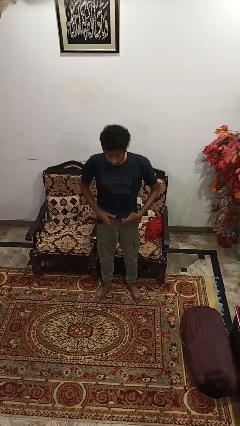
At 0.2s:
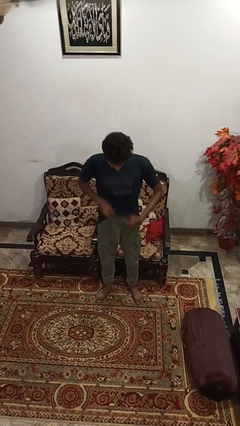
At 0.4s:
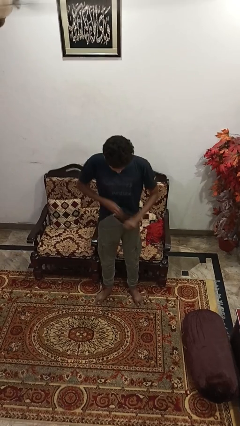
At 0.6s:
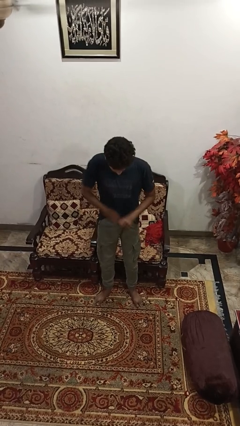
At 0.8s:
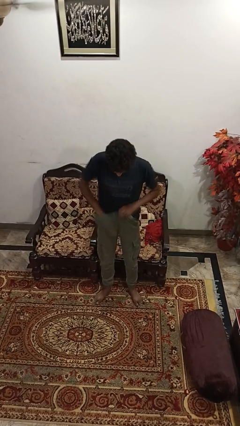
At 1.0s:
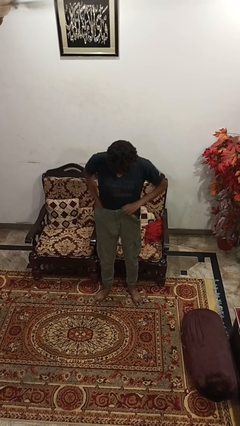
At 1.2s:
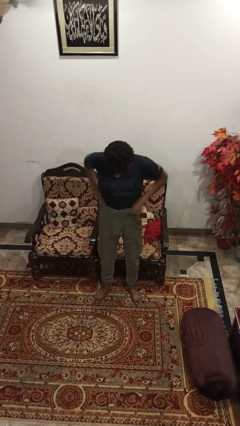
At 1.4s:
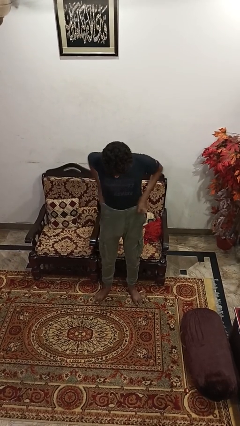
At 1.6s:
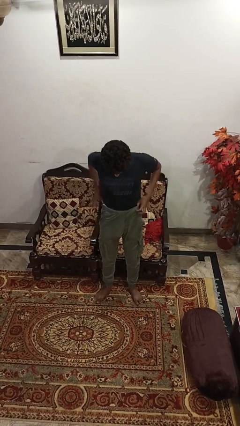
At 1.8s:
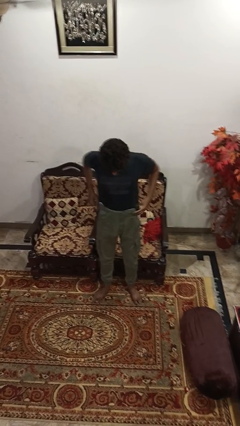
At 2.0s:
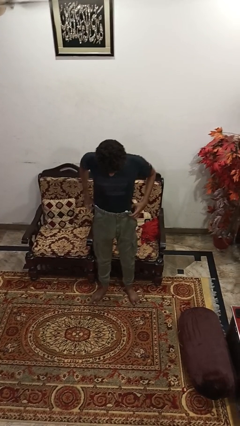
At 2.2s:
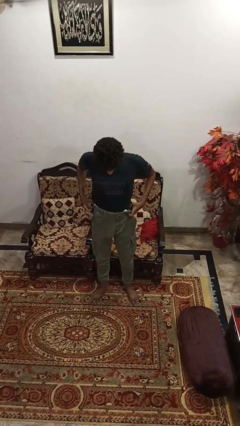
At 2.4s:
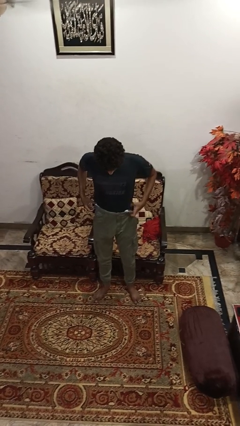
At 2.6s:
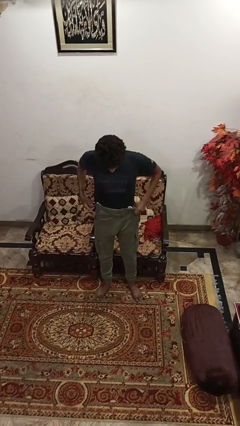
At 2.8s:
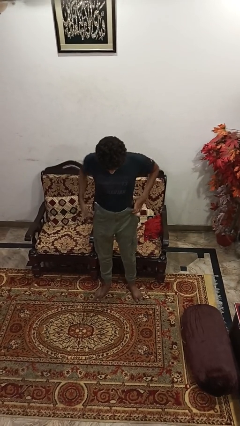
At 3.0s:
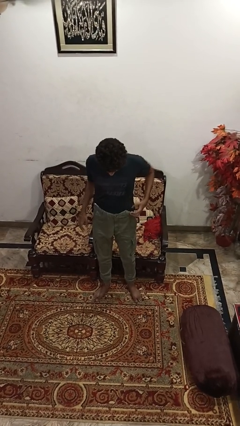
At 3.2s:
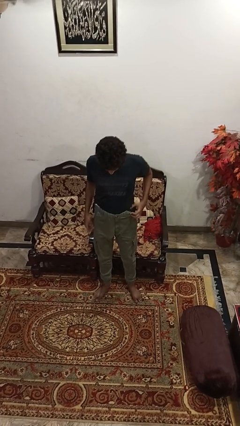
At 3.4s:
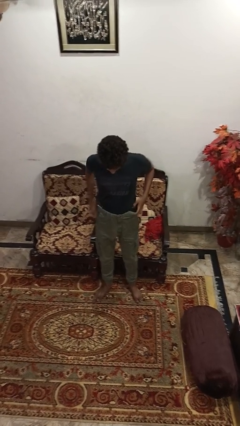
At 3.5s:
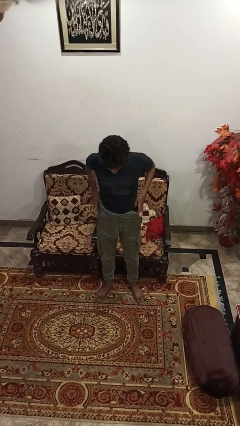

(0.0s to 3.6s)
person tucks in shirt

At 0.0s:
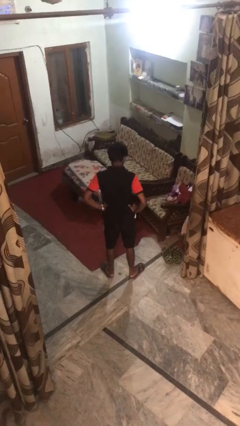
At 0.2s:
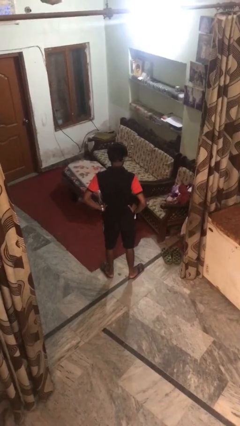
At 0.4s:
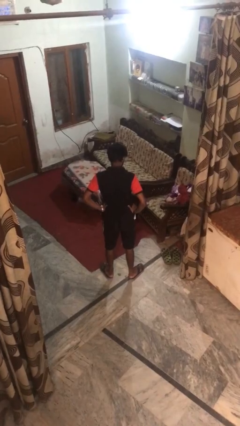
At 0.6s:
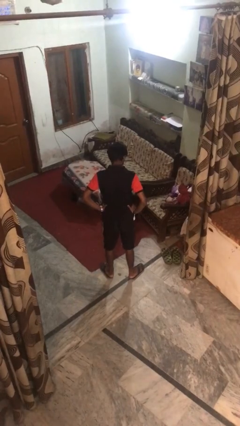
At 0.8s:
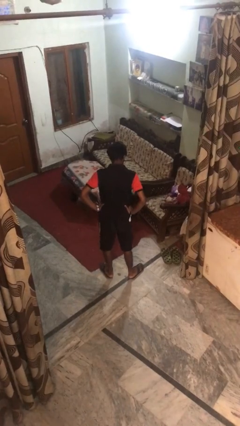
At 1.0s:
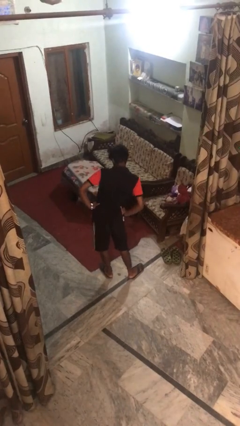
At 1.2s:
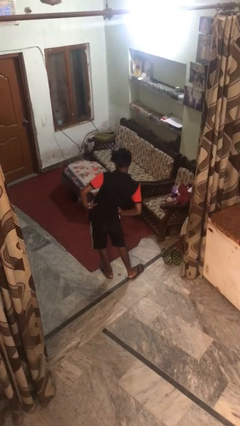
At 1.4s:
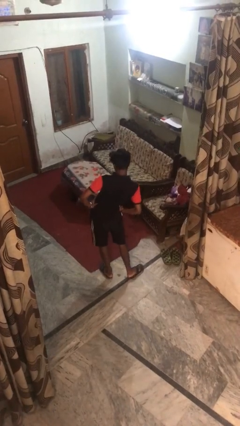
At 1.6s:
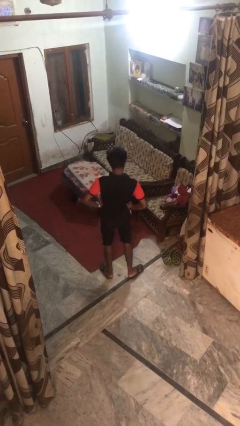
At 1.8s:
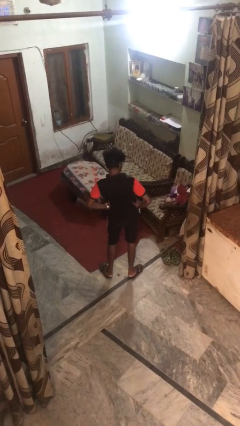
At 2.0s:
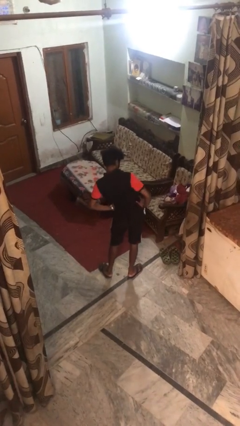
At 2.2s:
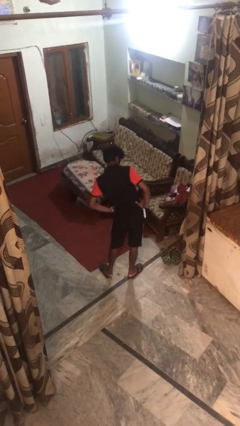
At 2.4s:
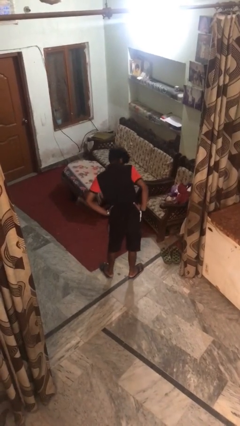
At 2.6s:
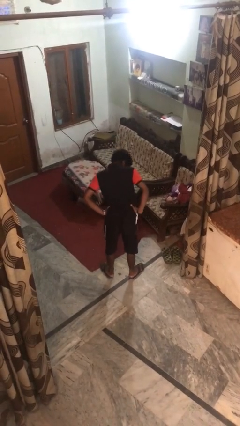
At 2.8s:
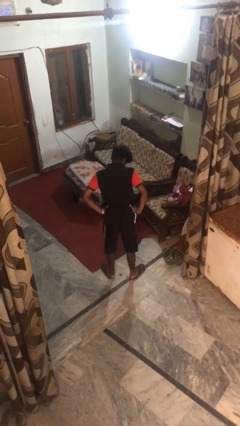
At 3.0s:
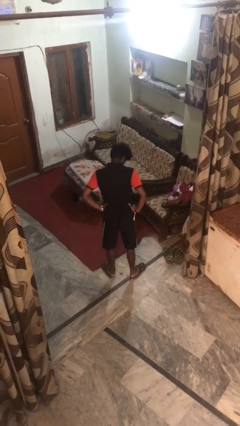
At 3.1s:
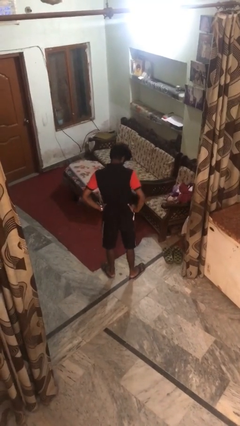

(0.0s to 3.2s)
person wiggles hips

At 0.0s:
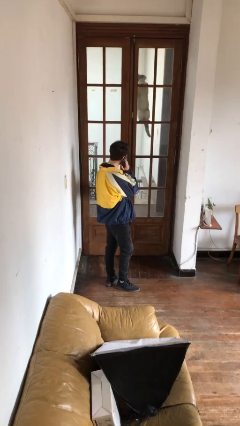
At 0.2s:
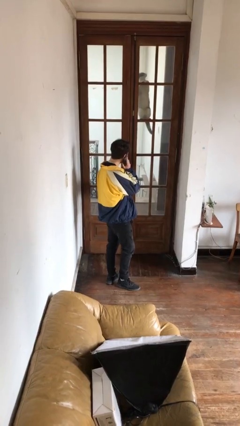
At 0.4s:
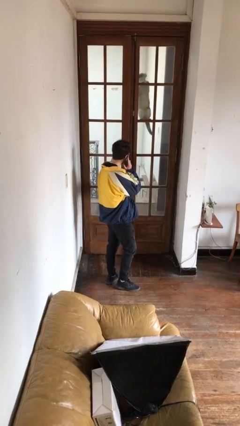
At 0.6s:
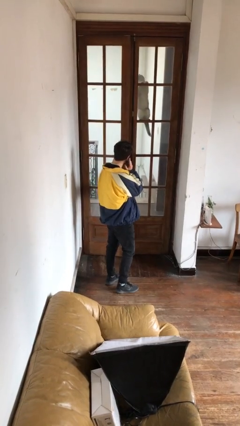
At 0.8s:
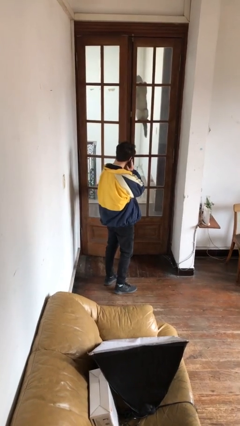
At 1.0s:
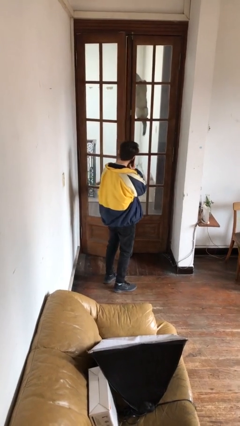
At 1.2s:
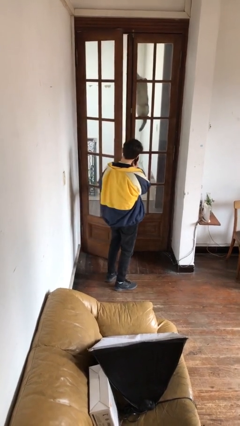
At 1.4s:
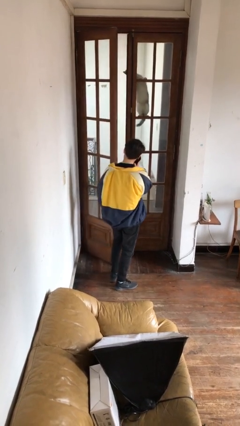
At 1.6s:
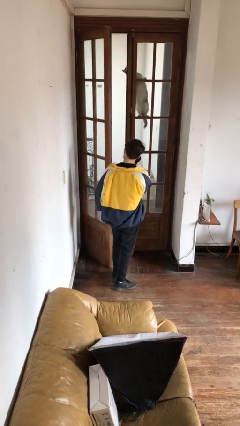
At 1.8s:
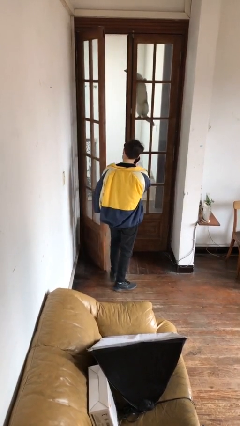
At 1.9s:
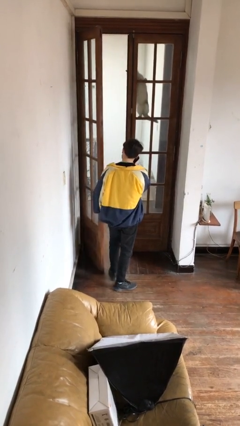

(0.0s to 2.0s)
person opens facility door

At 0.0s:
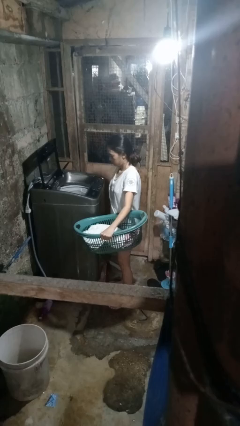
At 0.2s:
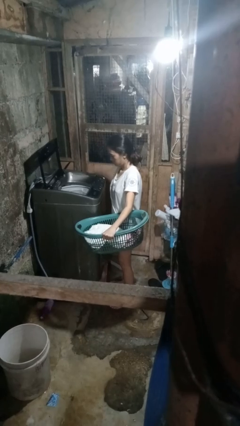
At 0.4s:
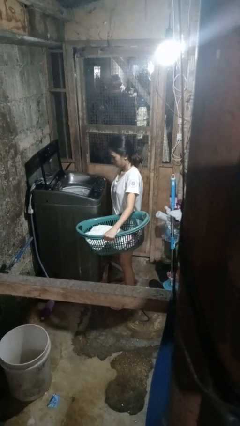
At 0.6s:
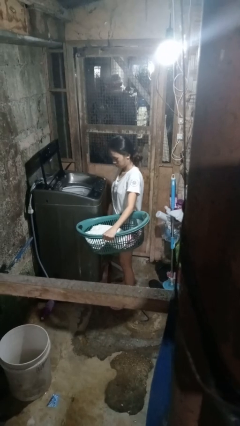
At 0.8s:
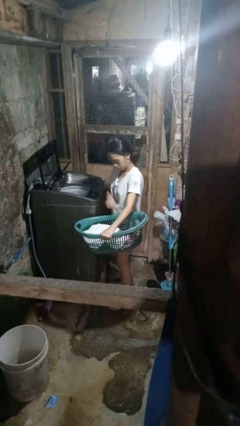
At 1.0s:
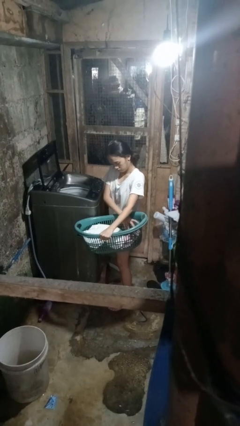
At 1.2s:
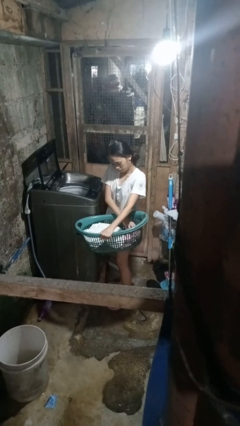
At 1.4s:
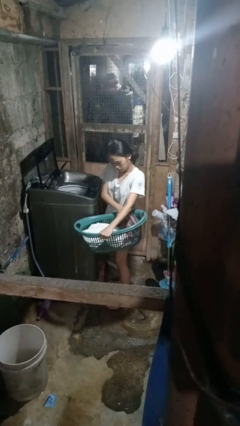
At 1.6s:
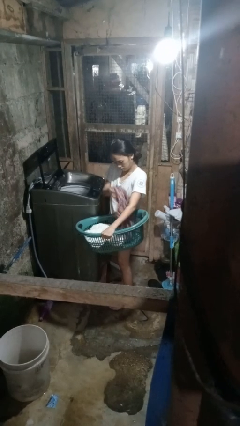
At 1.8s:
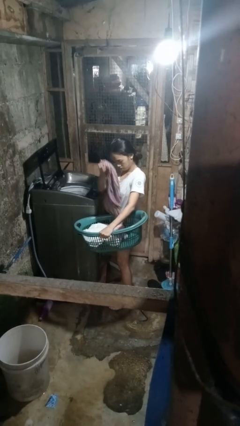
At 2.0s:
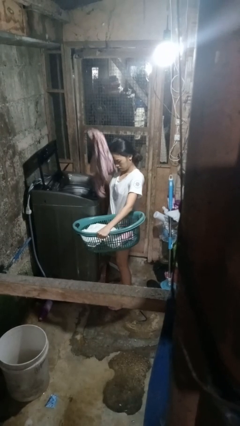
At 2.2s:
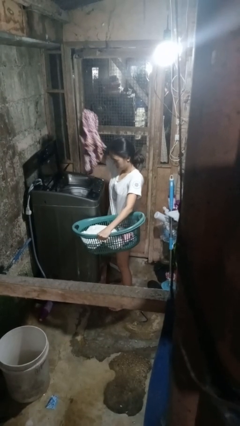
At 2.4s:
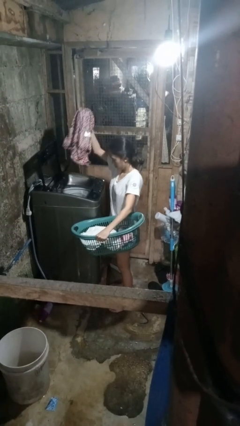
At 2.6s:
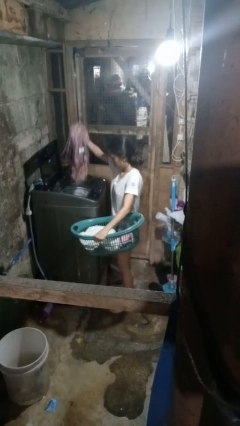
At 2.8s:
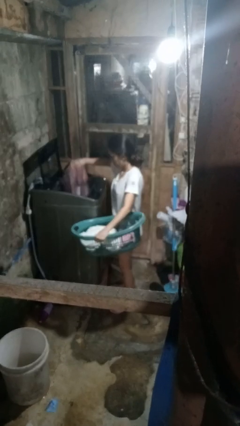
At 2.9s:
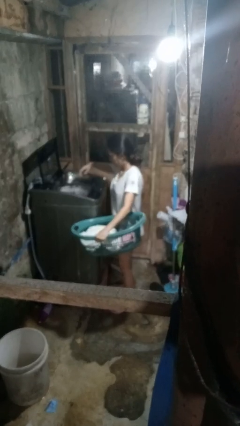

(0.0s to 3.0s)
person loads clotheswasher

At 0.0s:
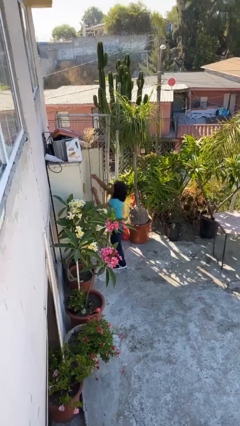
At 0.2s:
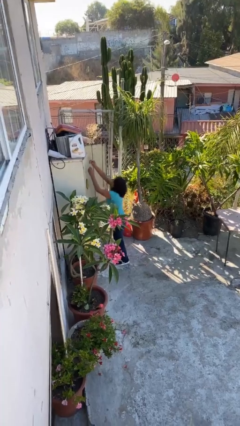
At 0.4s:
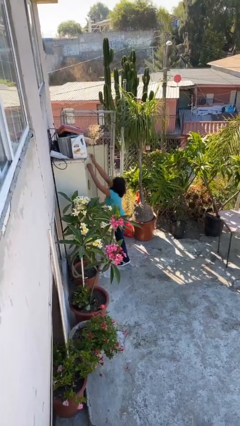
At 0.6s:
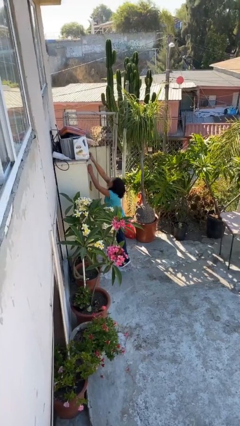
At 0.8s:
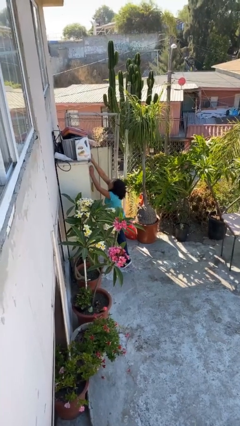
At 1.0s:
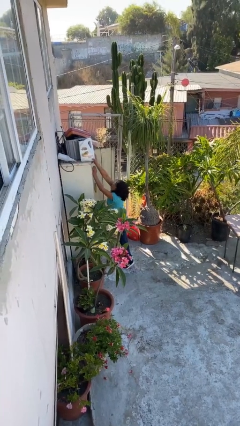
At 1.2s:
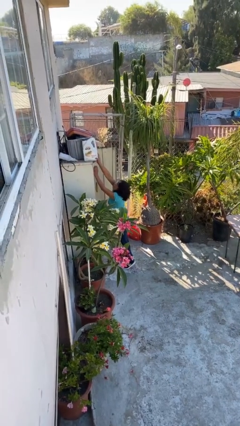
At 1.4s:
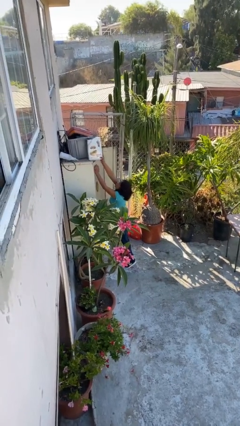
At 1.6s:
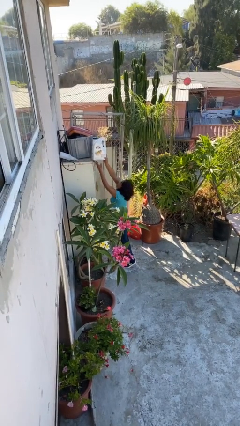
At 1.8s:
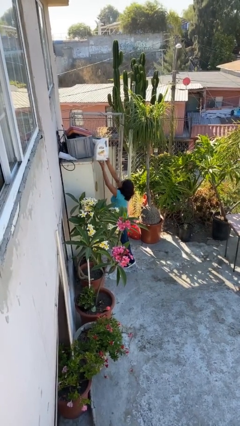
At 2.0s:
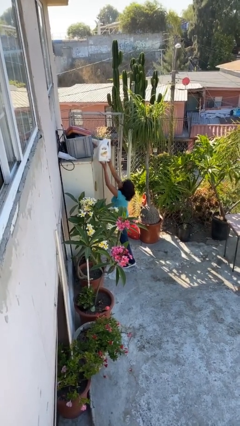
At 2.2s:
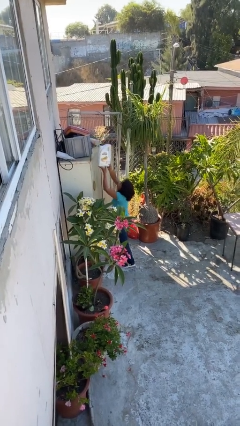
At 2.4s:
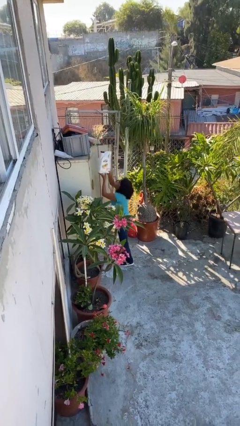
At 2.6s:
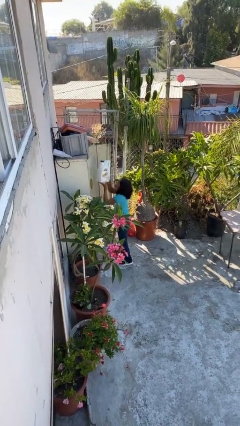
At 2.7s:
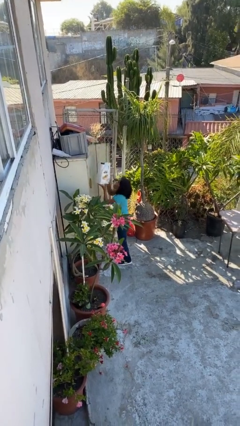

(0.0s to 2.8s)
person picks up object from shelf

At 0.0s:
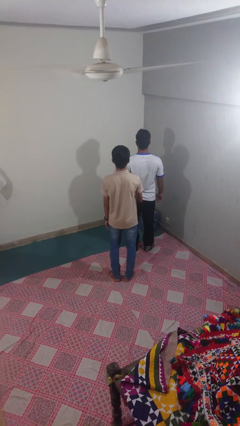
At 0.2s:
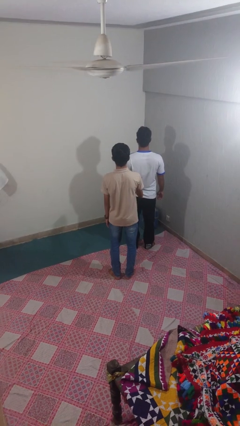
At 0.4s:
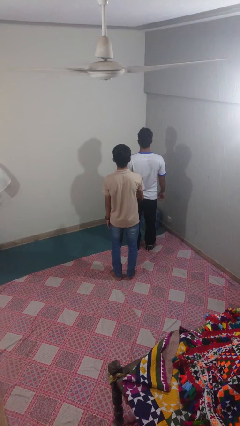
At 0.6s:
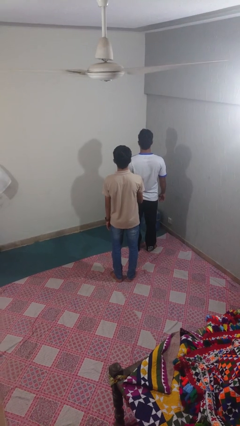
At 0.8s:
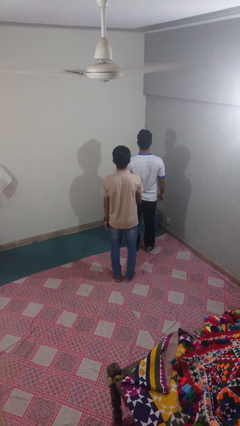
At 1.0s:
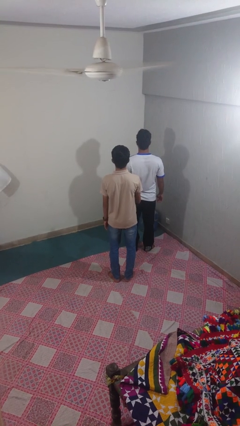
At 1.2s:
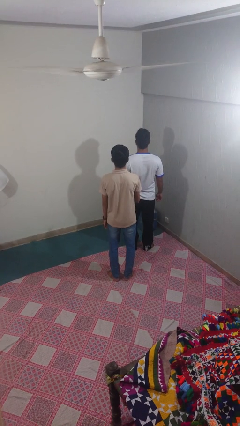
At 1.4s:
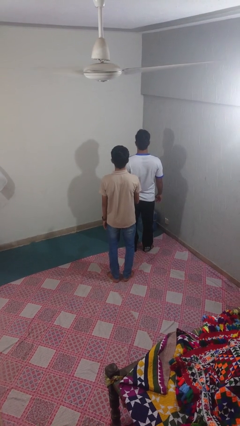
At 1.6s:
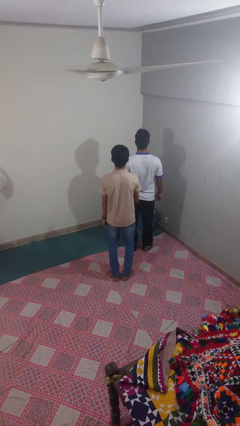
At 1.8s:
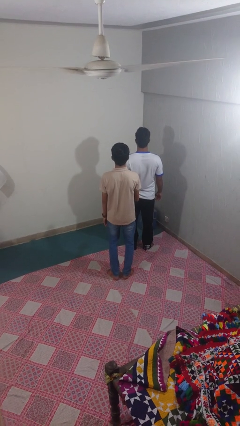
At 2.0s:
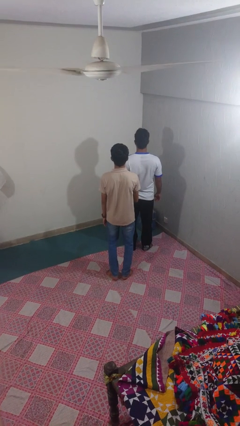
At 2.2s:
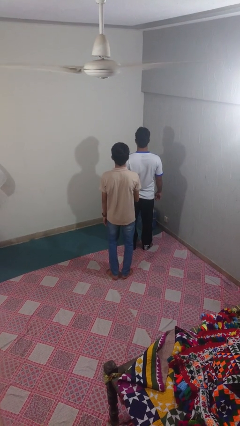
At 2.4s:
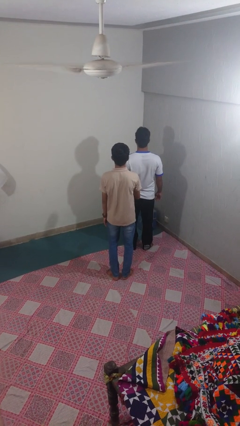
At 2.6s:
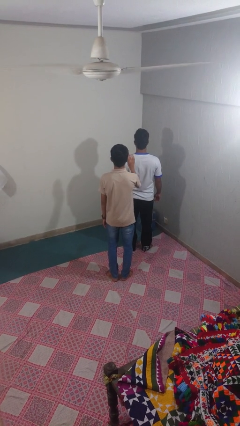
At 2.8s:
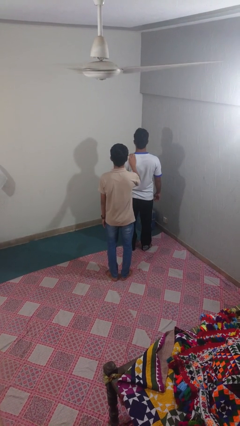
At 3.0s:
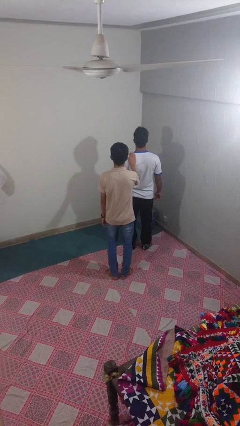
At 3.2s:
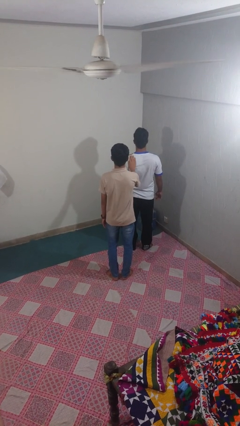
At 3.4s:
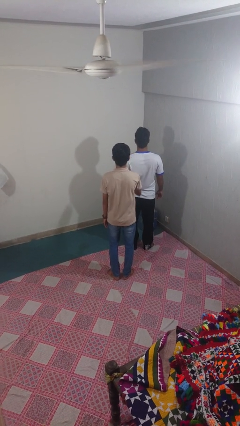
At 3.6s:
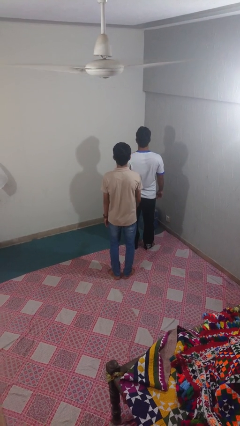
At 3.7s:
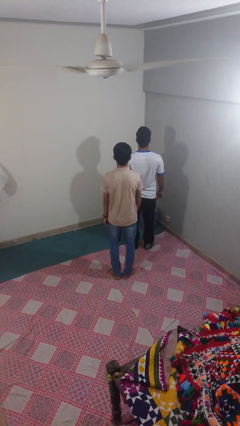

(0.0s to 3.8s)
person touches back of person
